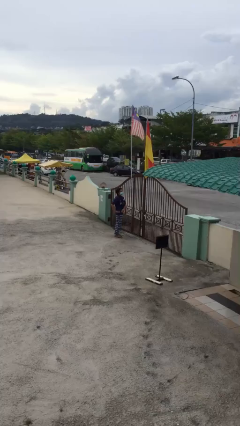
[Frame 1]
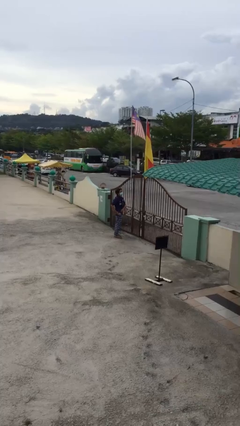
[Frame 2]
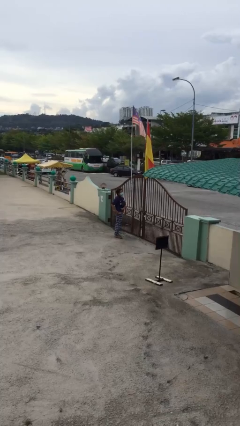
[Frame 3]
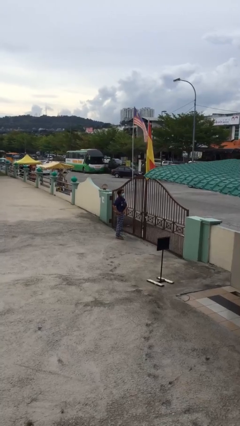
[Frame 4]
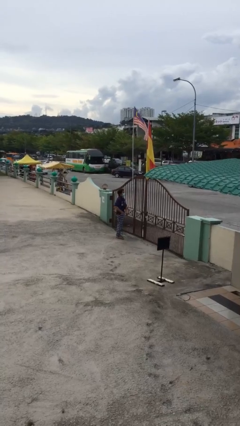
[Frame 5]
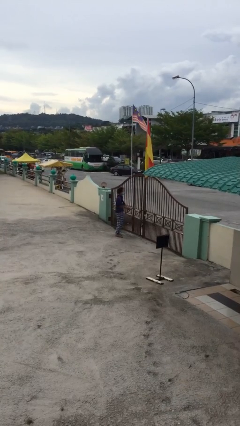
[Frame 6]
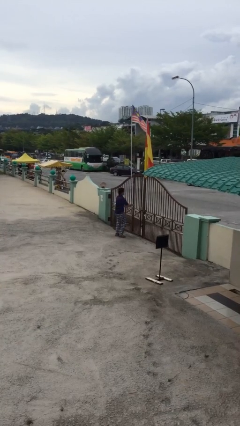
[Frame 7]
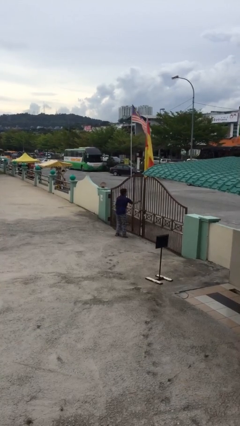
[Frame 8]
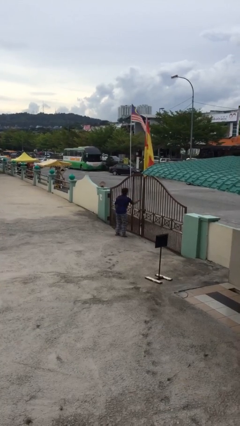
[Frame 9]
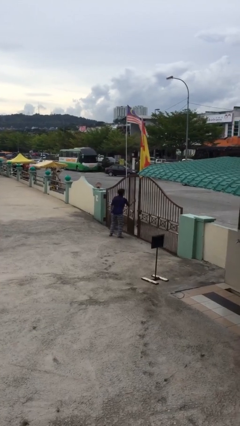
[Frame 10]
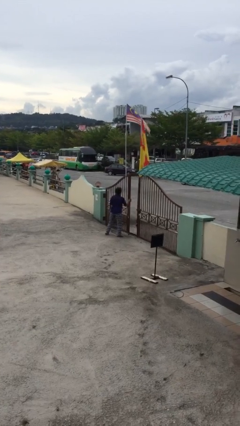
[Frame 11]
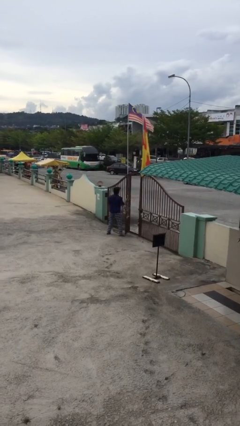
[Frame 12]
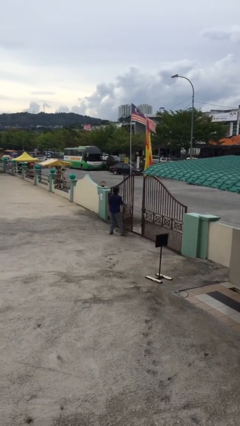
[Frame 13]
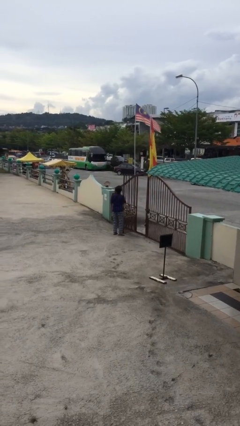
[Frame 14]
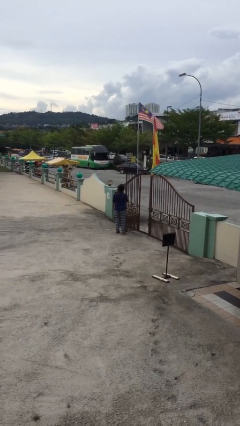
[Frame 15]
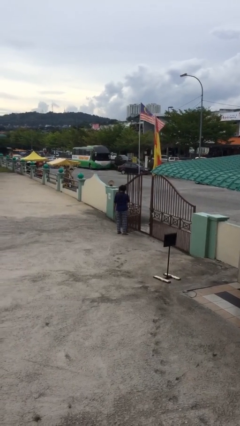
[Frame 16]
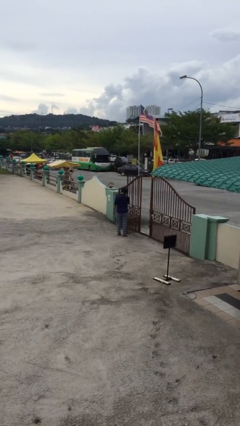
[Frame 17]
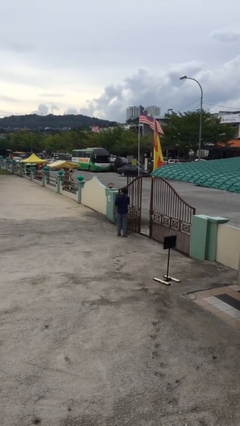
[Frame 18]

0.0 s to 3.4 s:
person opens facility door

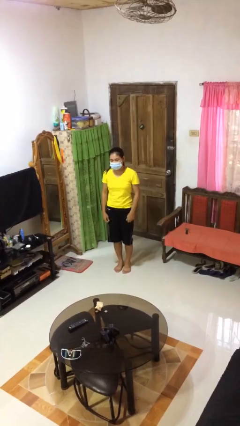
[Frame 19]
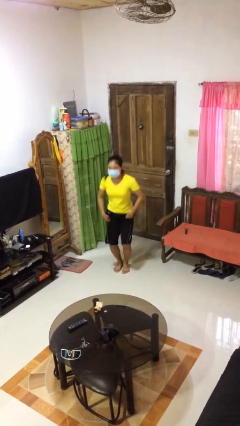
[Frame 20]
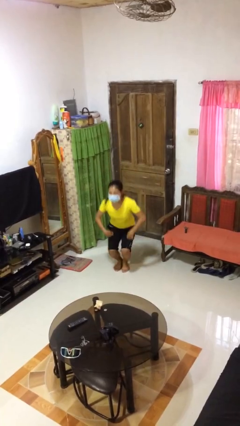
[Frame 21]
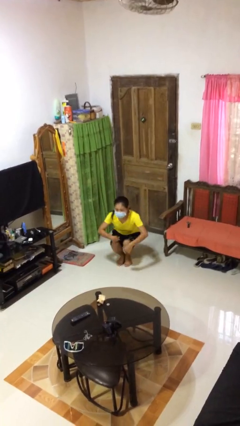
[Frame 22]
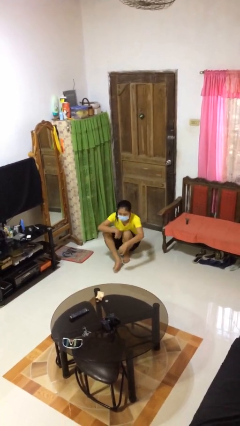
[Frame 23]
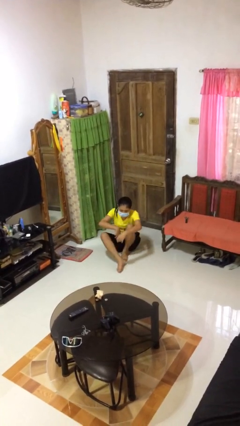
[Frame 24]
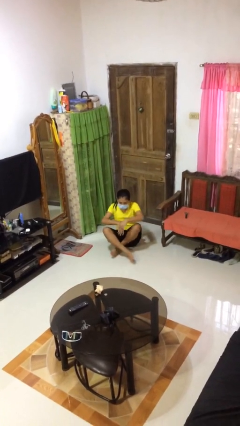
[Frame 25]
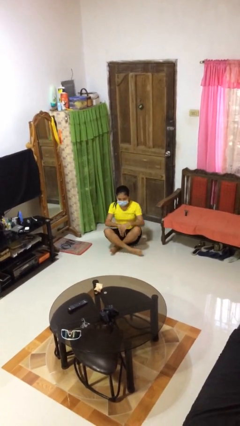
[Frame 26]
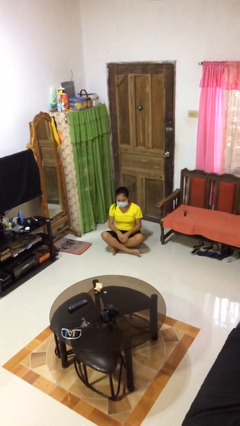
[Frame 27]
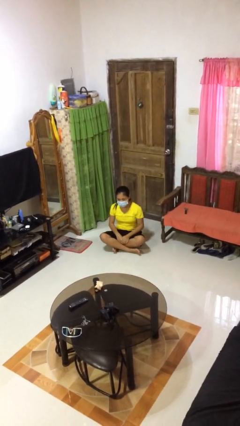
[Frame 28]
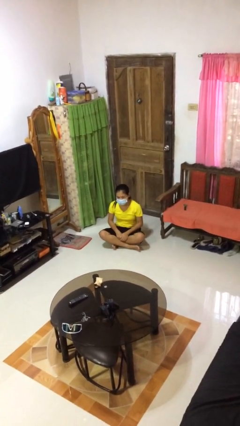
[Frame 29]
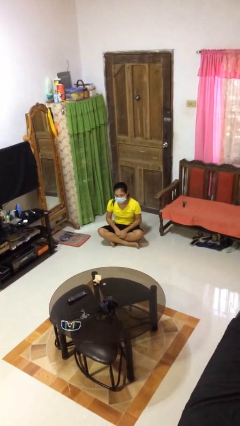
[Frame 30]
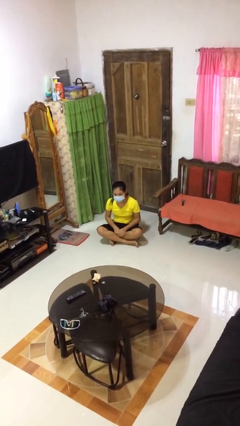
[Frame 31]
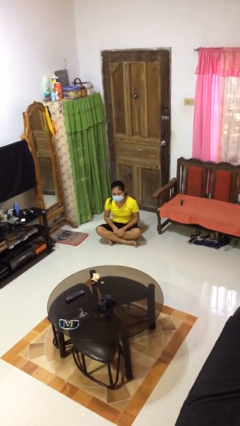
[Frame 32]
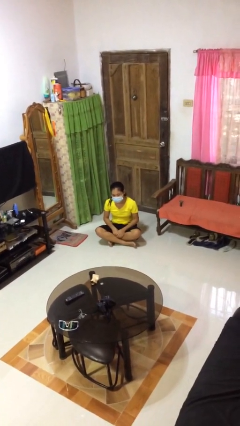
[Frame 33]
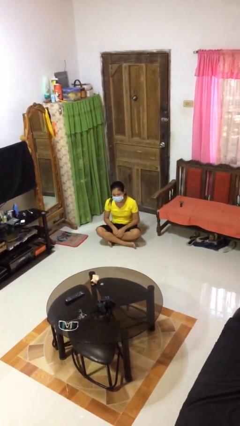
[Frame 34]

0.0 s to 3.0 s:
person sits crisscross

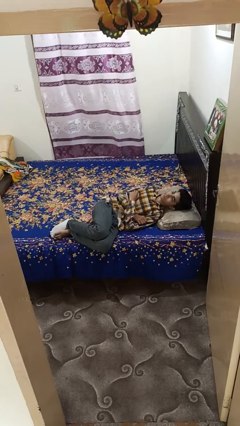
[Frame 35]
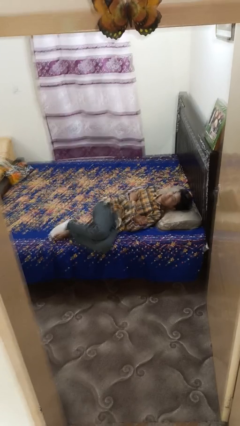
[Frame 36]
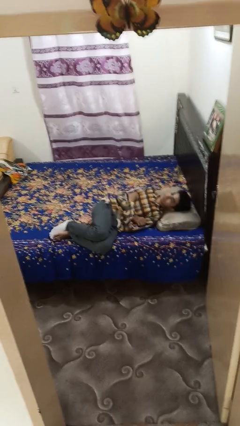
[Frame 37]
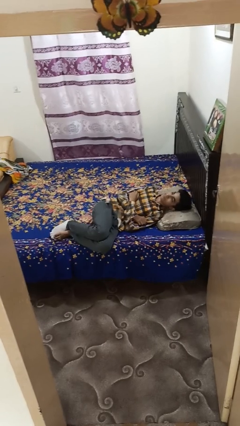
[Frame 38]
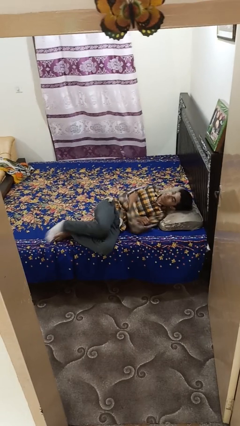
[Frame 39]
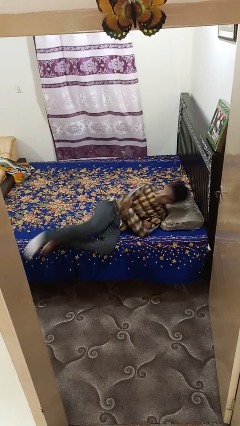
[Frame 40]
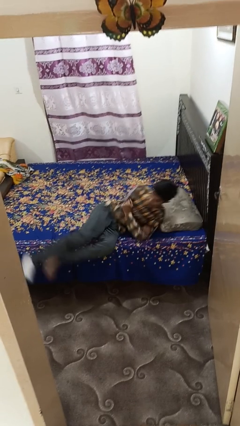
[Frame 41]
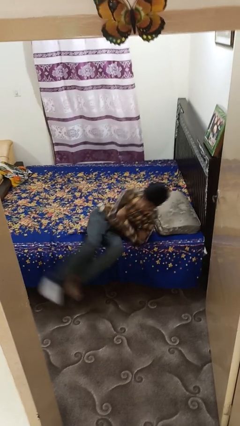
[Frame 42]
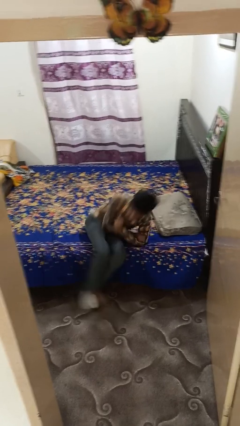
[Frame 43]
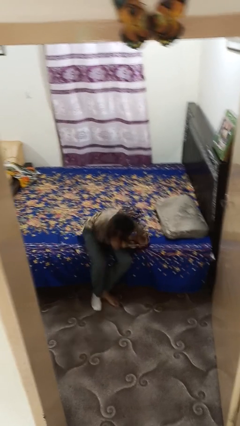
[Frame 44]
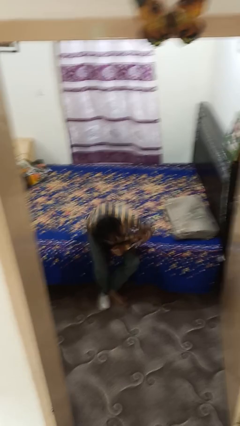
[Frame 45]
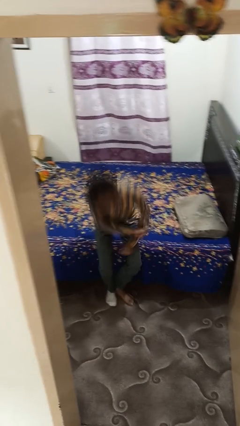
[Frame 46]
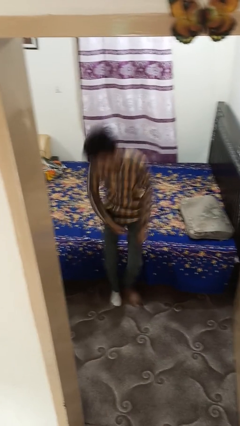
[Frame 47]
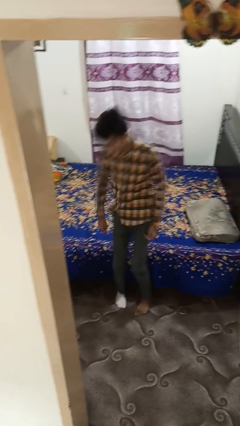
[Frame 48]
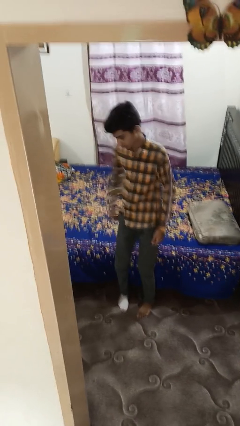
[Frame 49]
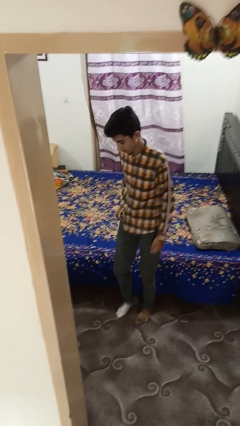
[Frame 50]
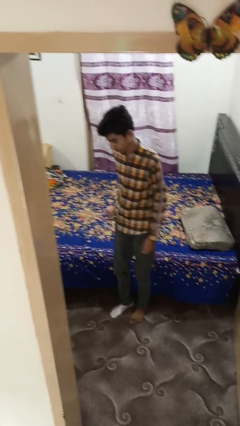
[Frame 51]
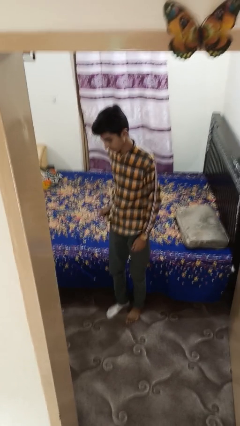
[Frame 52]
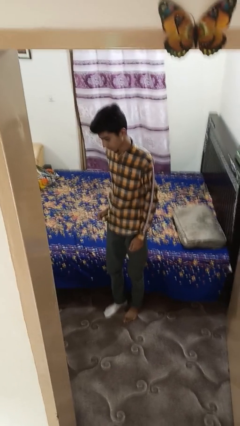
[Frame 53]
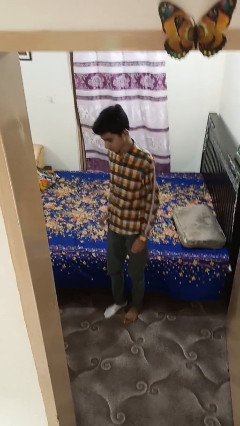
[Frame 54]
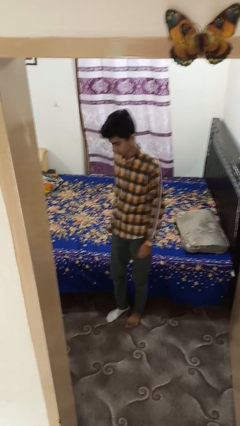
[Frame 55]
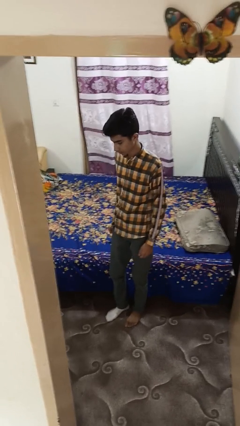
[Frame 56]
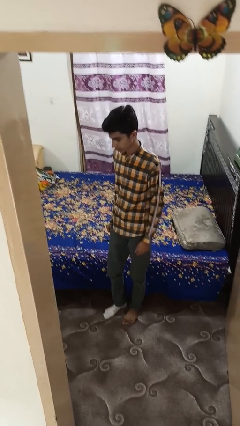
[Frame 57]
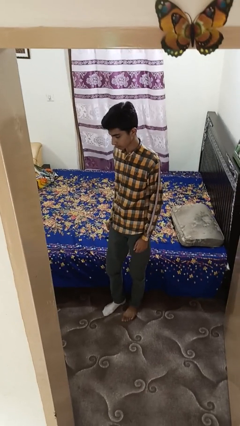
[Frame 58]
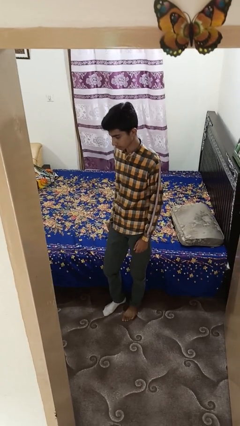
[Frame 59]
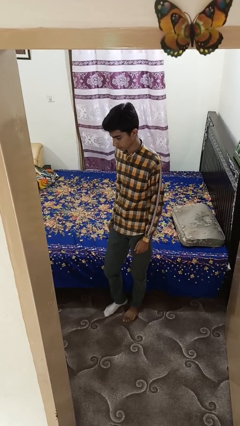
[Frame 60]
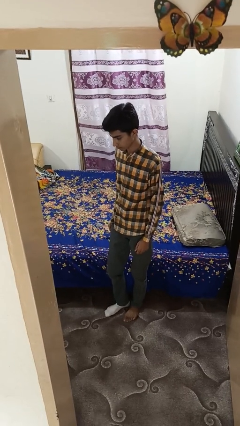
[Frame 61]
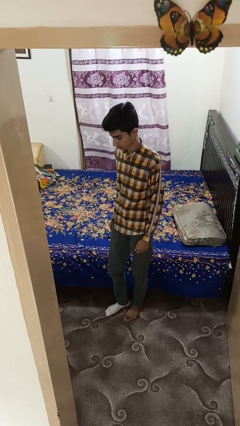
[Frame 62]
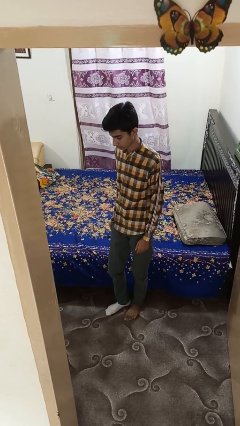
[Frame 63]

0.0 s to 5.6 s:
person stands up

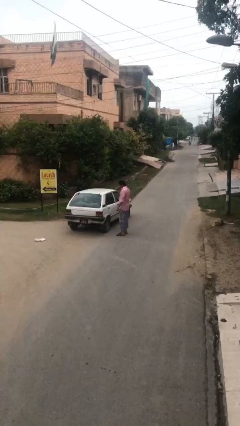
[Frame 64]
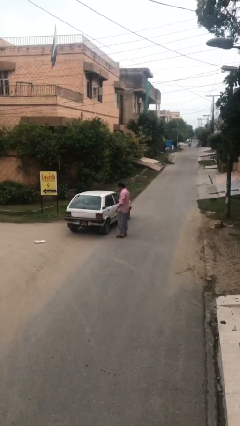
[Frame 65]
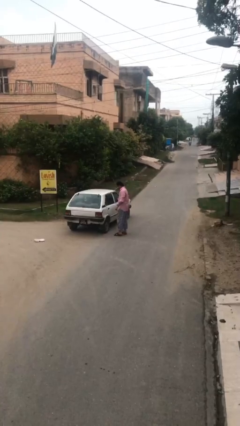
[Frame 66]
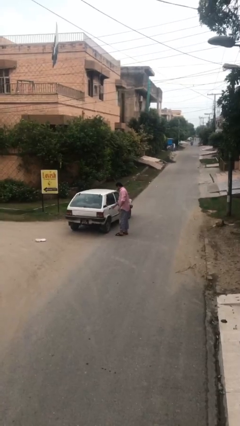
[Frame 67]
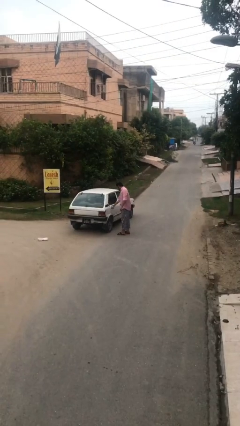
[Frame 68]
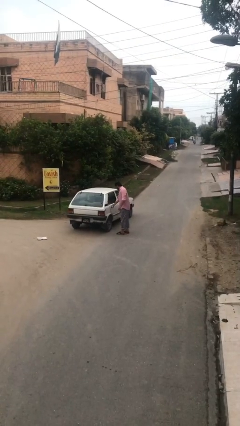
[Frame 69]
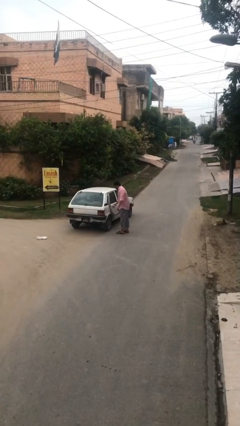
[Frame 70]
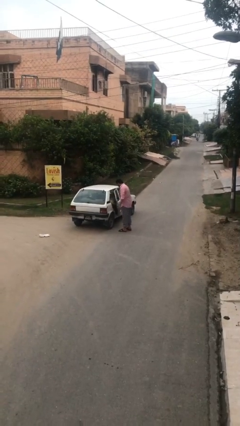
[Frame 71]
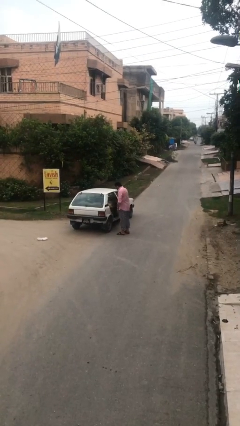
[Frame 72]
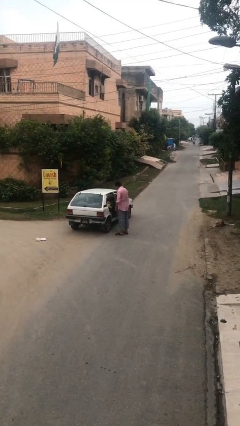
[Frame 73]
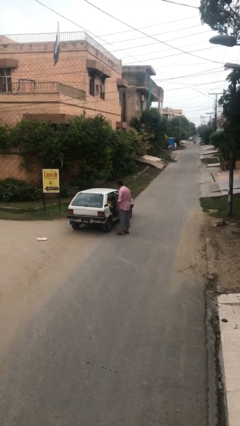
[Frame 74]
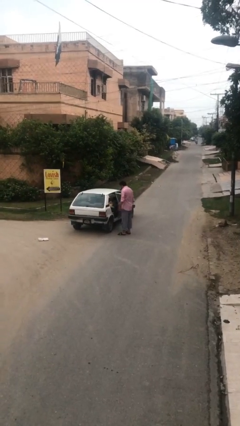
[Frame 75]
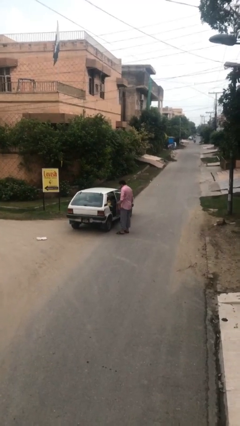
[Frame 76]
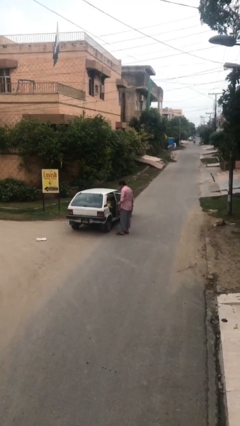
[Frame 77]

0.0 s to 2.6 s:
person opens car door

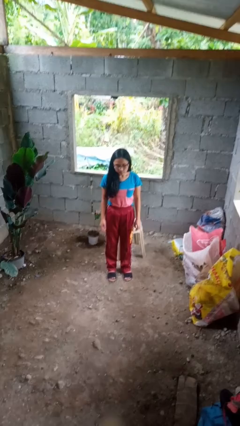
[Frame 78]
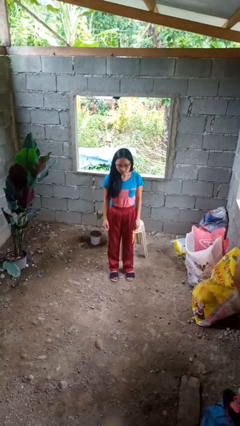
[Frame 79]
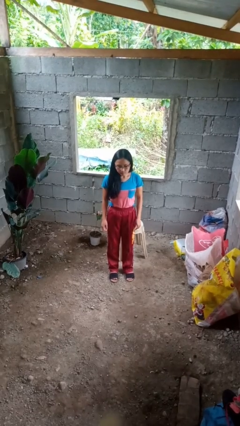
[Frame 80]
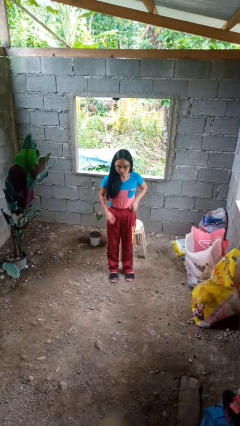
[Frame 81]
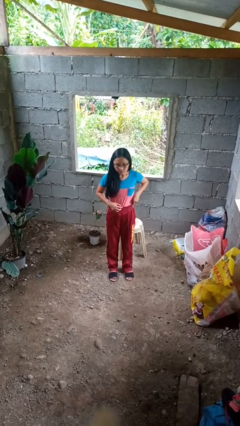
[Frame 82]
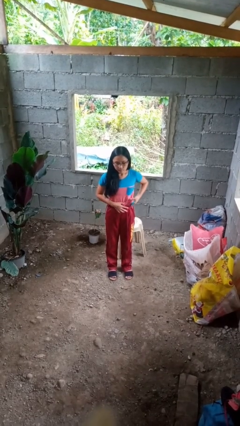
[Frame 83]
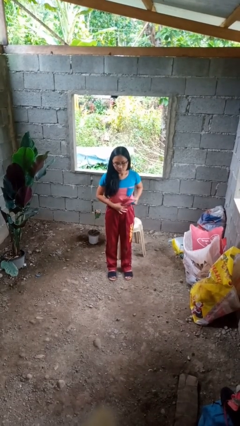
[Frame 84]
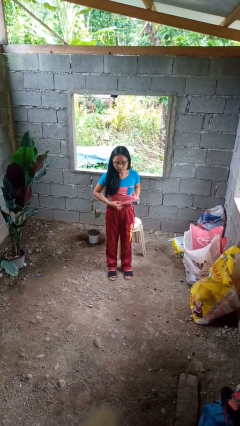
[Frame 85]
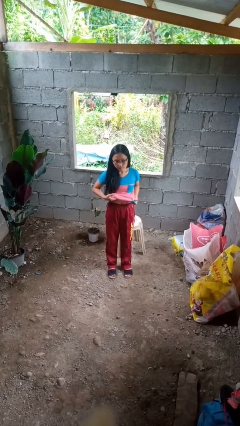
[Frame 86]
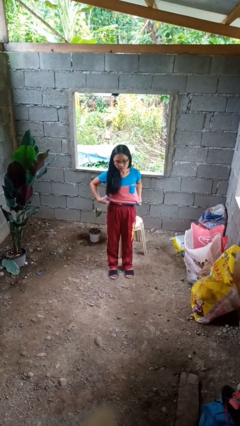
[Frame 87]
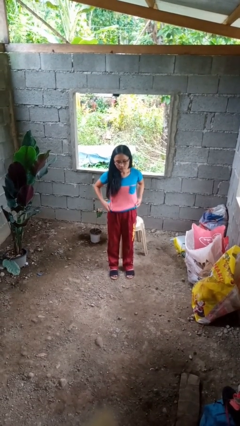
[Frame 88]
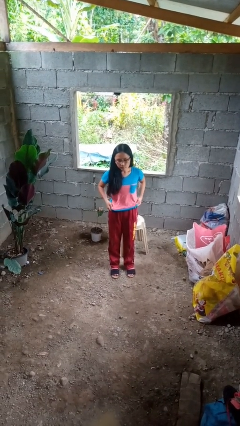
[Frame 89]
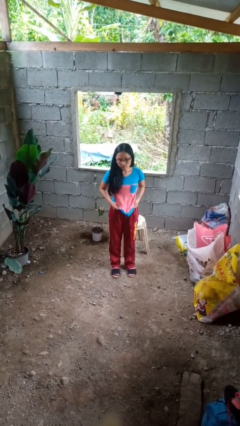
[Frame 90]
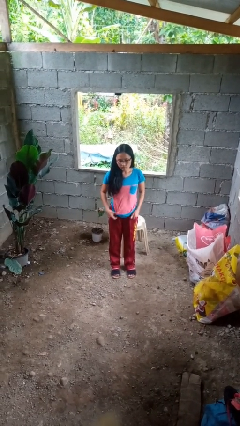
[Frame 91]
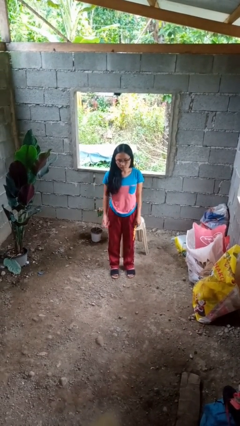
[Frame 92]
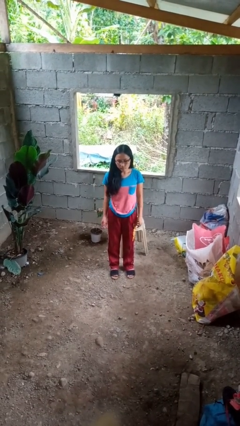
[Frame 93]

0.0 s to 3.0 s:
person untucks shirt
